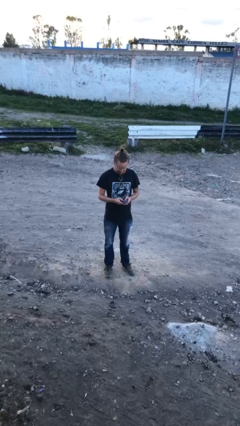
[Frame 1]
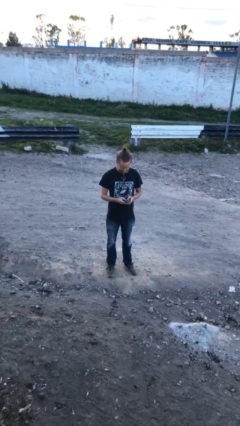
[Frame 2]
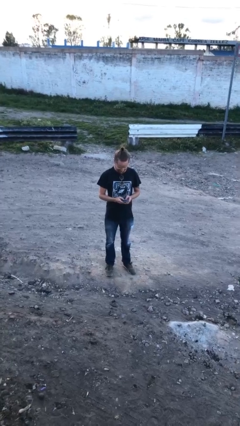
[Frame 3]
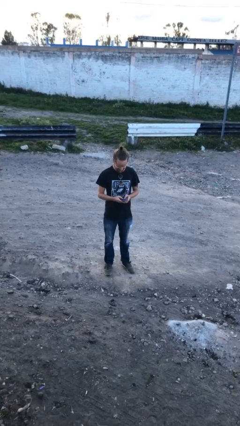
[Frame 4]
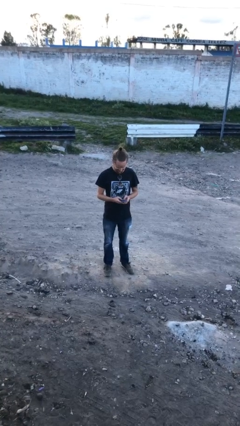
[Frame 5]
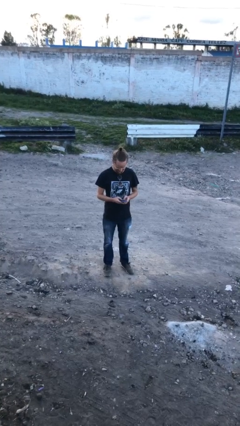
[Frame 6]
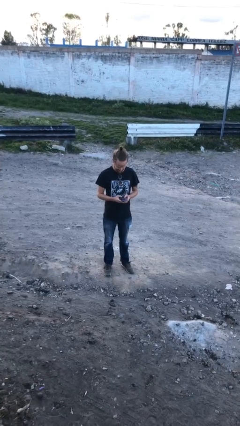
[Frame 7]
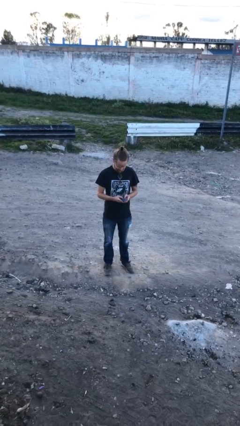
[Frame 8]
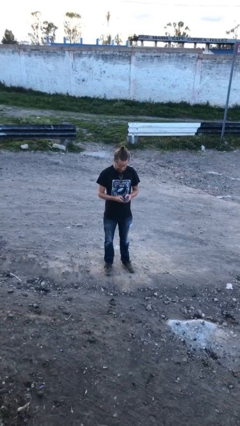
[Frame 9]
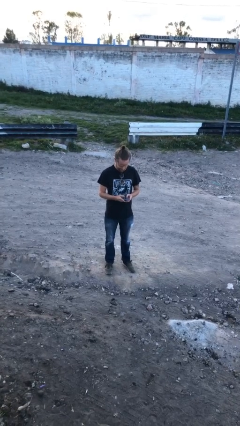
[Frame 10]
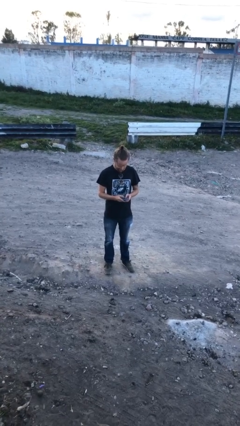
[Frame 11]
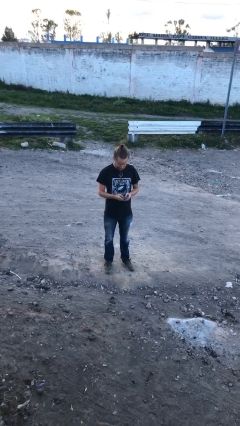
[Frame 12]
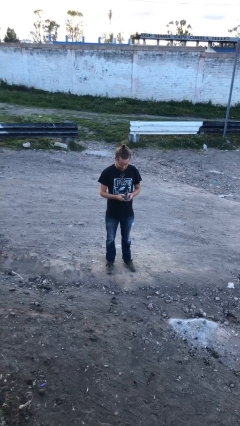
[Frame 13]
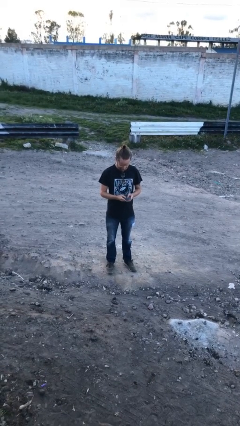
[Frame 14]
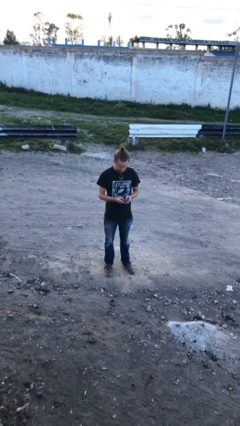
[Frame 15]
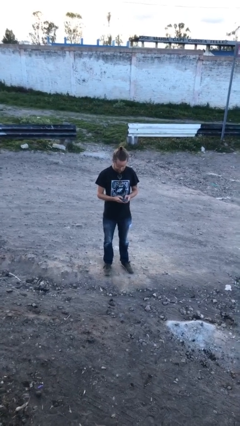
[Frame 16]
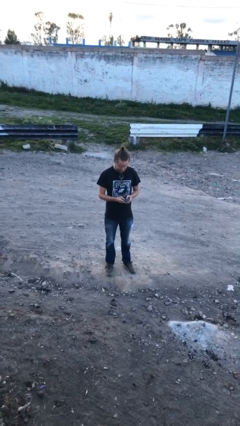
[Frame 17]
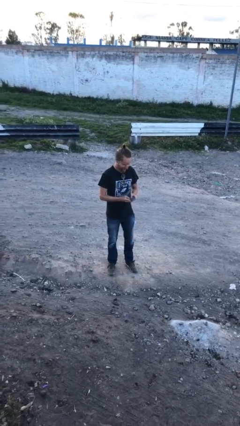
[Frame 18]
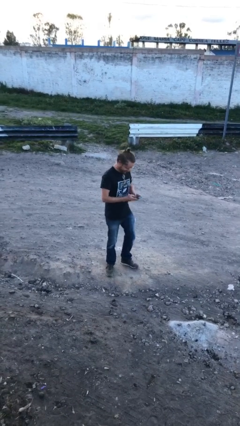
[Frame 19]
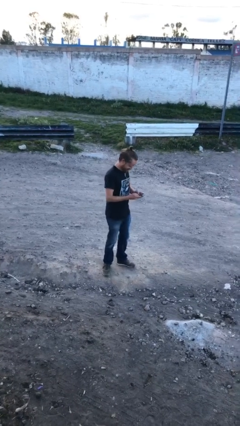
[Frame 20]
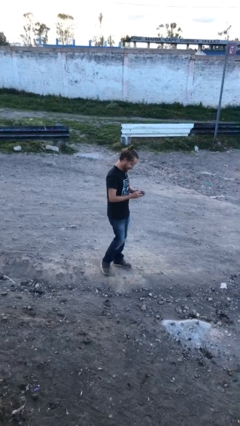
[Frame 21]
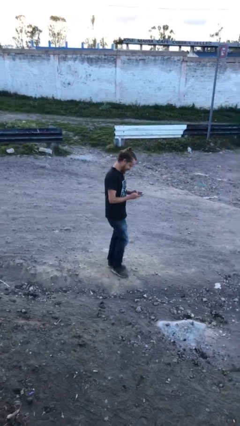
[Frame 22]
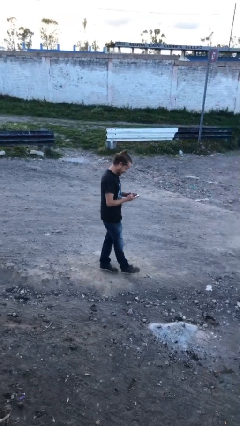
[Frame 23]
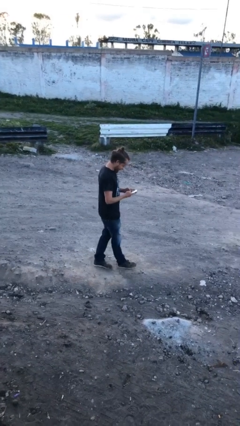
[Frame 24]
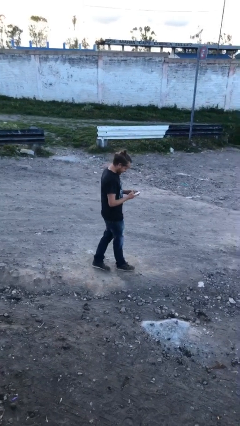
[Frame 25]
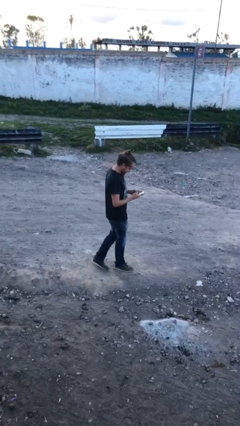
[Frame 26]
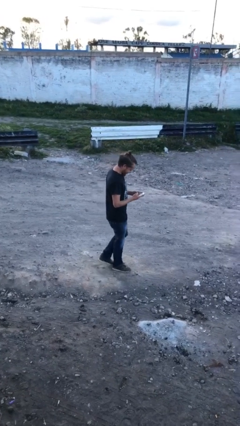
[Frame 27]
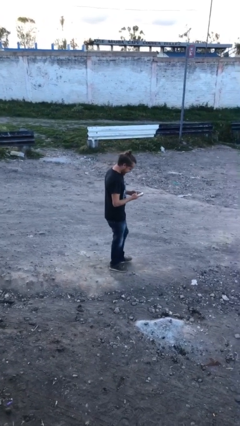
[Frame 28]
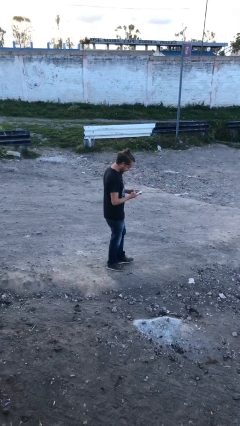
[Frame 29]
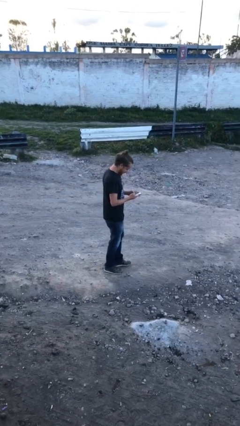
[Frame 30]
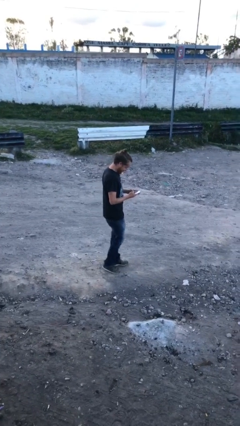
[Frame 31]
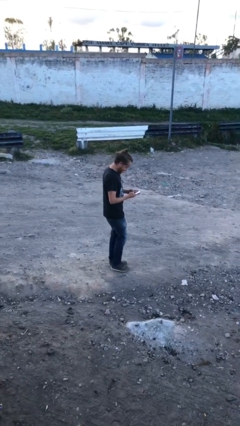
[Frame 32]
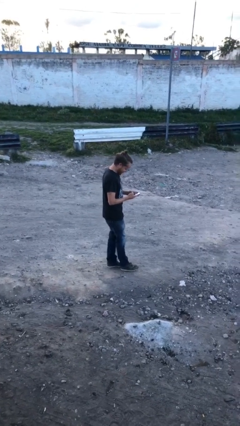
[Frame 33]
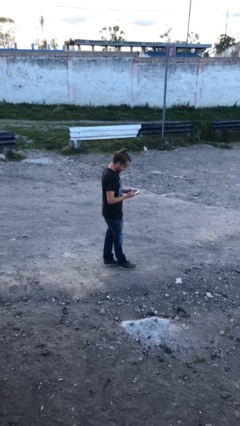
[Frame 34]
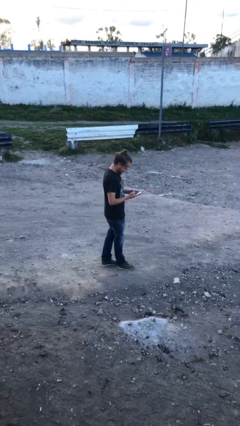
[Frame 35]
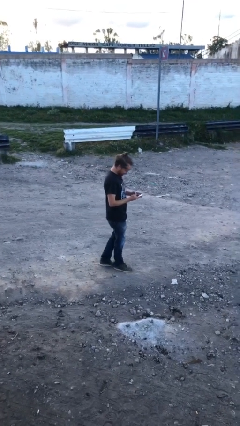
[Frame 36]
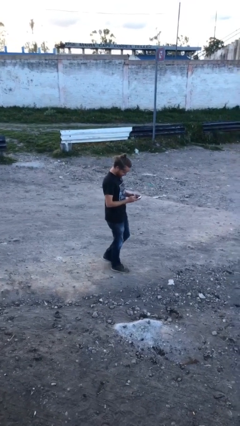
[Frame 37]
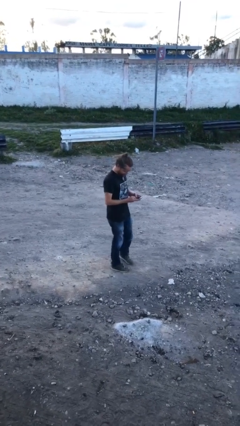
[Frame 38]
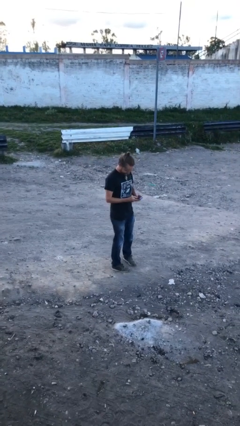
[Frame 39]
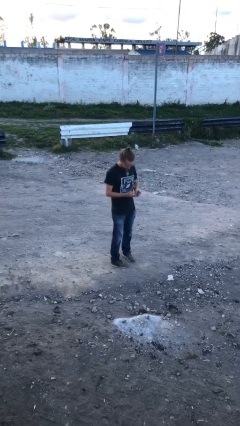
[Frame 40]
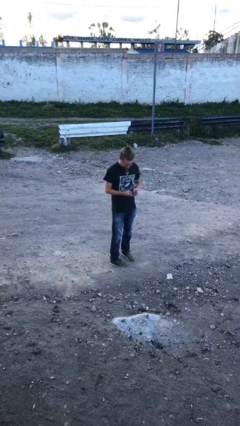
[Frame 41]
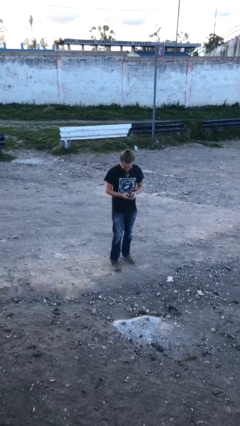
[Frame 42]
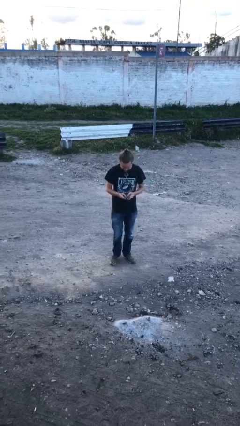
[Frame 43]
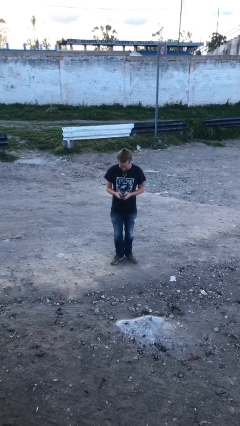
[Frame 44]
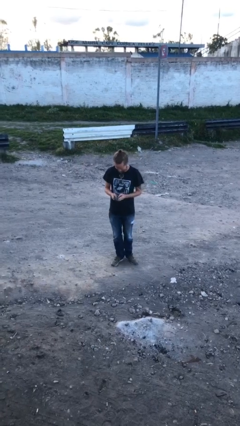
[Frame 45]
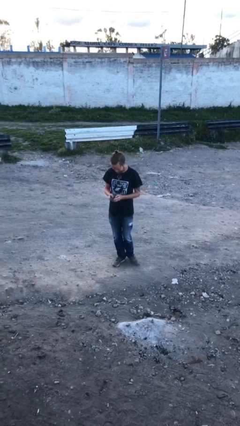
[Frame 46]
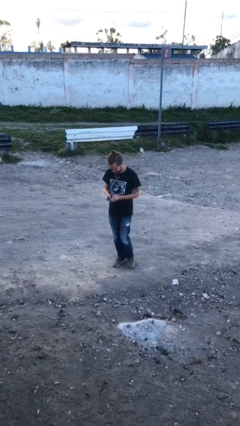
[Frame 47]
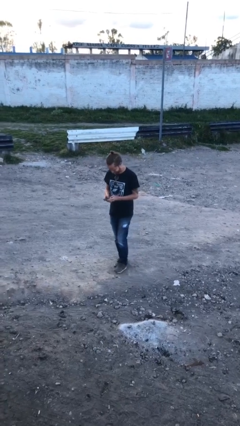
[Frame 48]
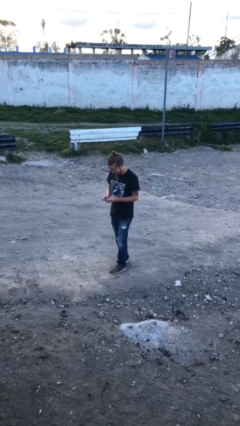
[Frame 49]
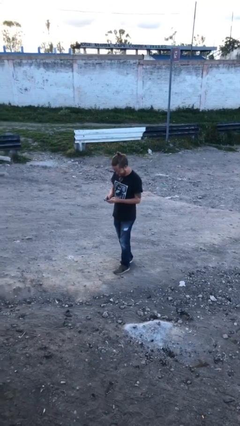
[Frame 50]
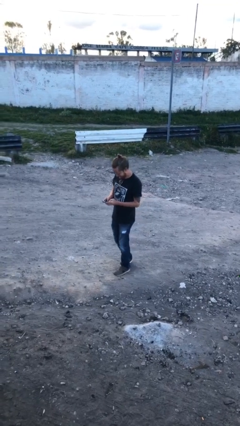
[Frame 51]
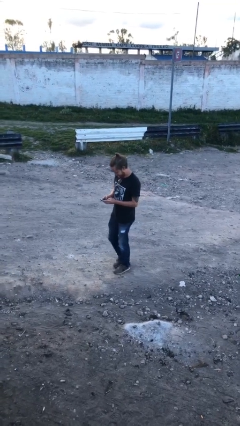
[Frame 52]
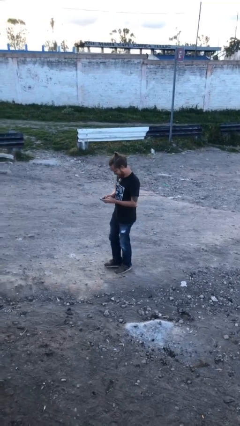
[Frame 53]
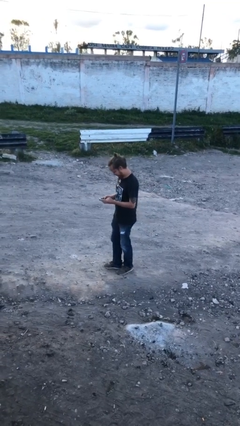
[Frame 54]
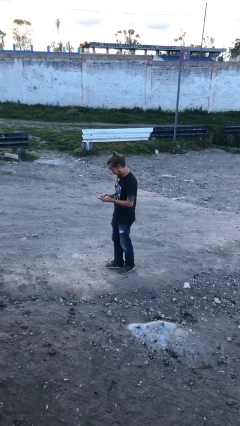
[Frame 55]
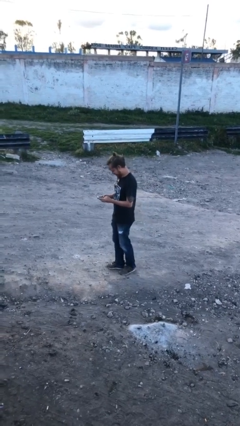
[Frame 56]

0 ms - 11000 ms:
person texts on phone

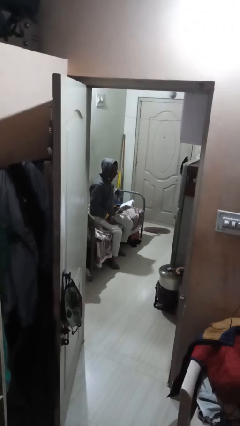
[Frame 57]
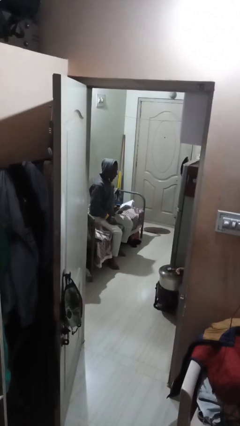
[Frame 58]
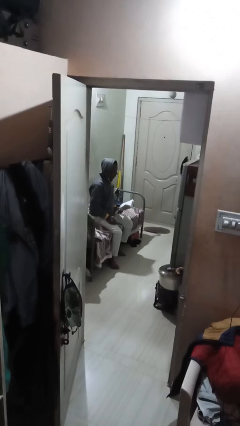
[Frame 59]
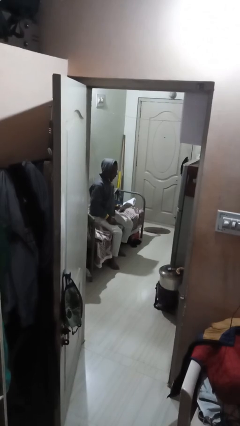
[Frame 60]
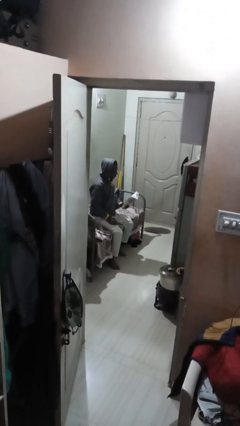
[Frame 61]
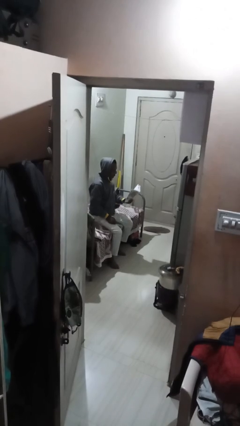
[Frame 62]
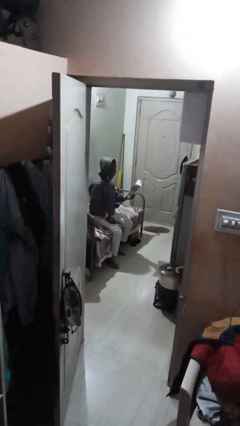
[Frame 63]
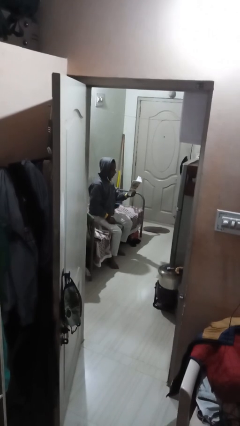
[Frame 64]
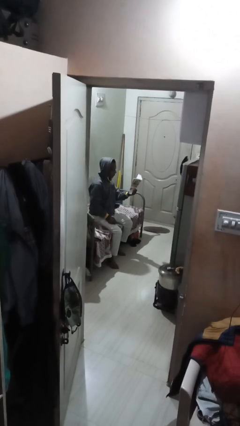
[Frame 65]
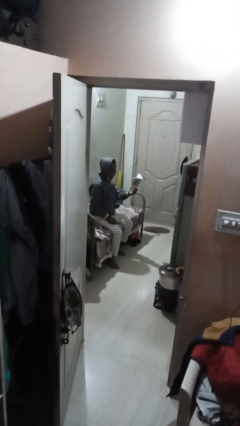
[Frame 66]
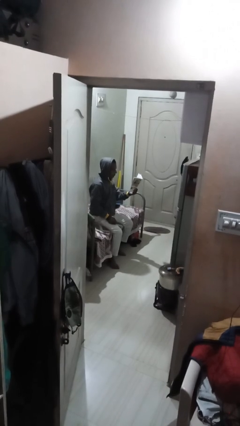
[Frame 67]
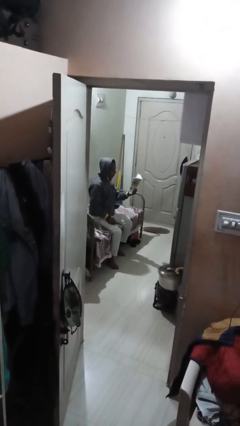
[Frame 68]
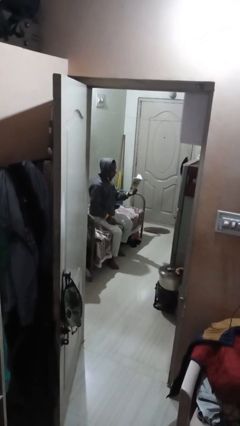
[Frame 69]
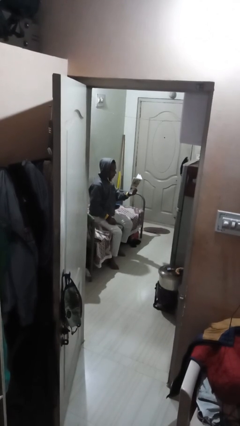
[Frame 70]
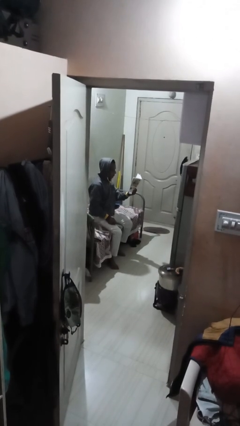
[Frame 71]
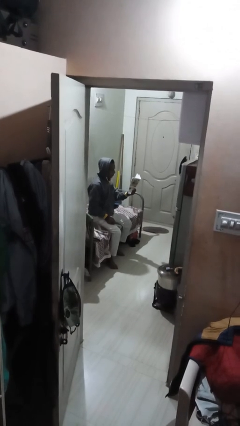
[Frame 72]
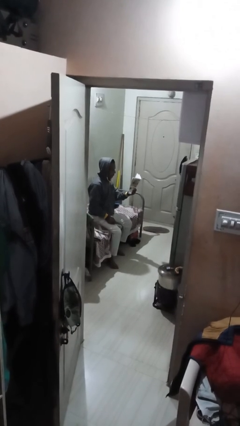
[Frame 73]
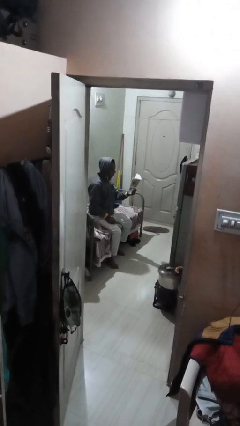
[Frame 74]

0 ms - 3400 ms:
person reads document

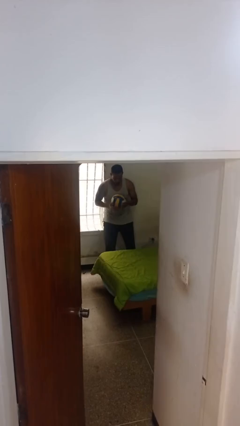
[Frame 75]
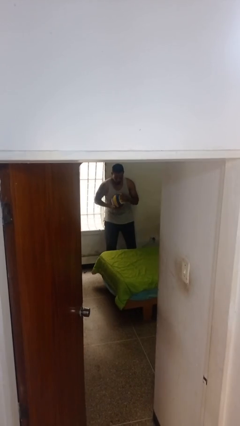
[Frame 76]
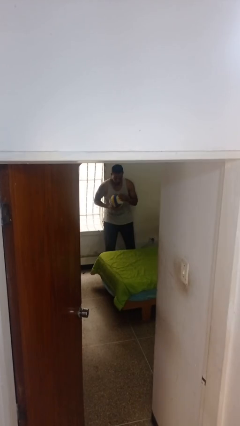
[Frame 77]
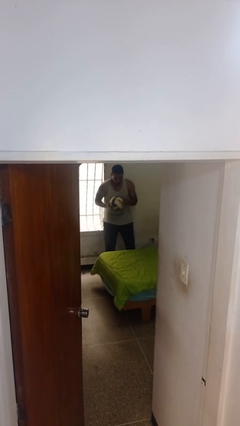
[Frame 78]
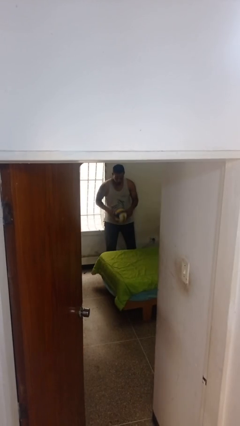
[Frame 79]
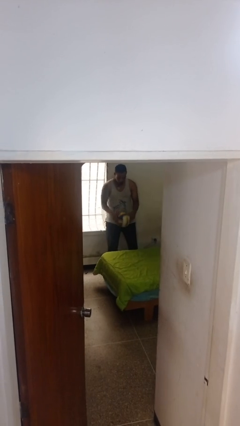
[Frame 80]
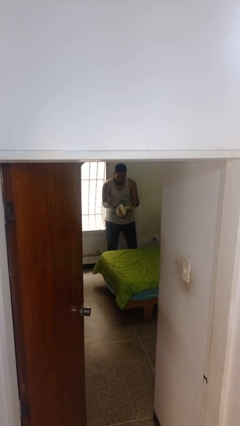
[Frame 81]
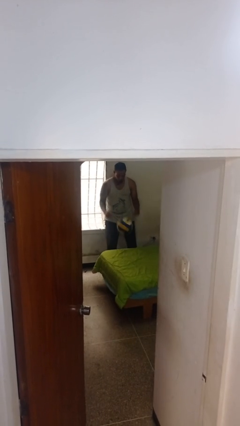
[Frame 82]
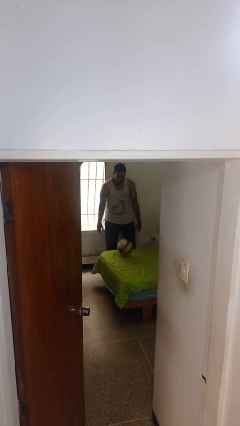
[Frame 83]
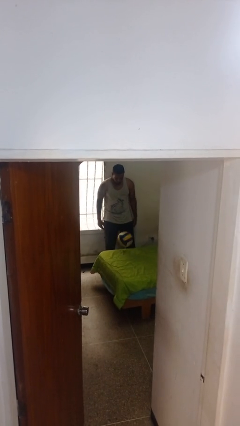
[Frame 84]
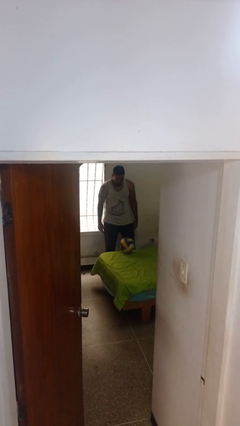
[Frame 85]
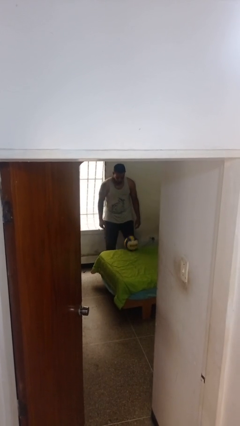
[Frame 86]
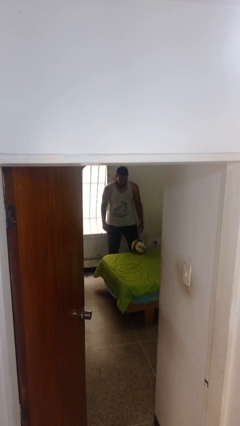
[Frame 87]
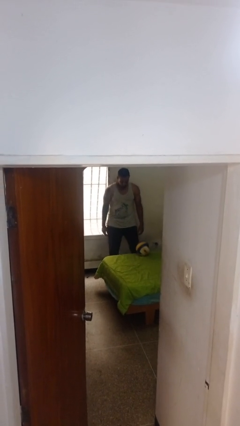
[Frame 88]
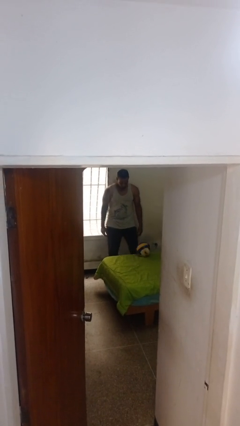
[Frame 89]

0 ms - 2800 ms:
person throws object on bed

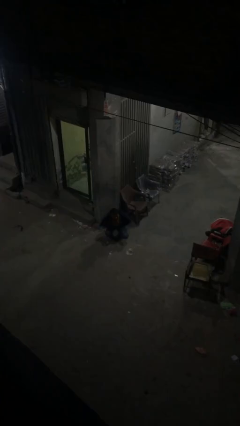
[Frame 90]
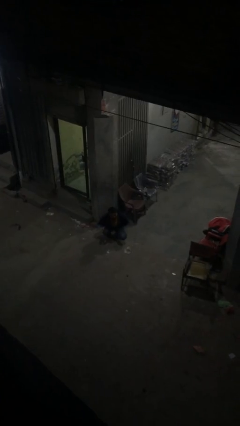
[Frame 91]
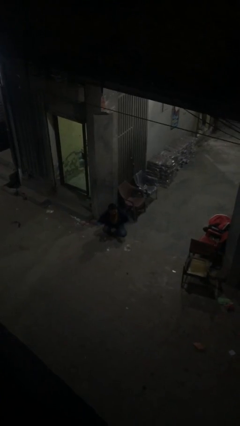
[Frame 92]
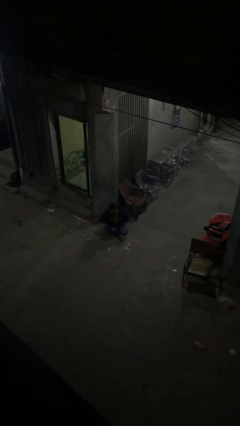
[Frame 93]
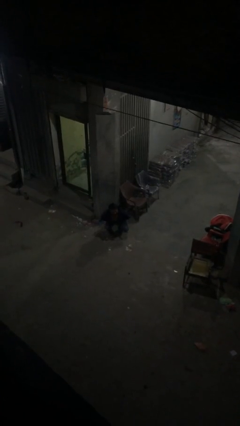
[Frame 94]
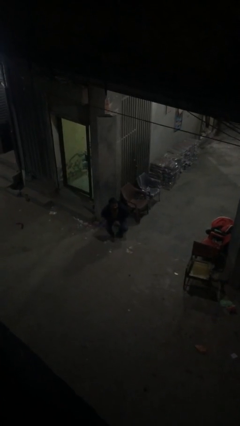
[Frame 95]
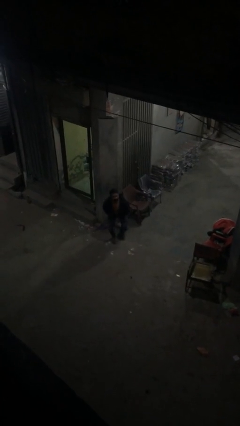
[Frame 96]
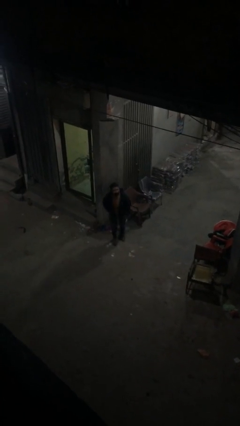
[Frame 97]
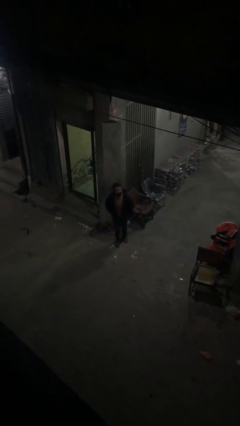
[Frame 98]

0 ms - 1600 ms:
person stands up
